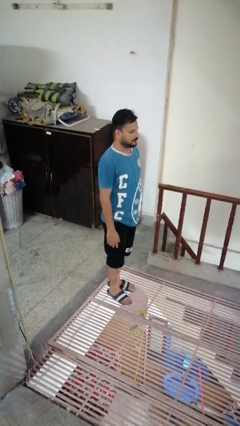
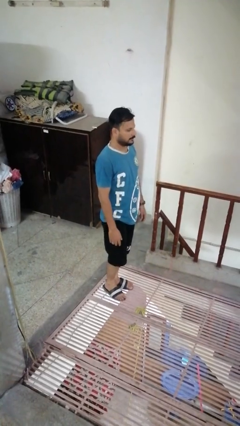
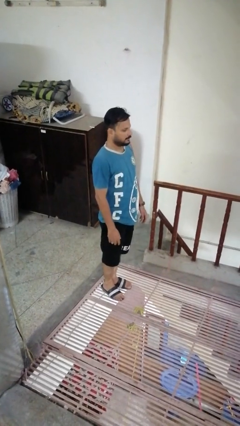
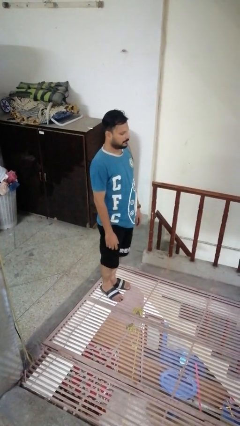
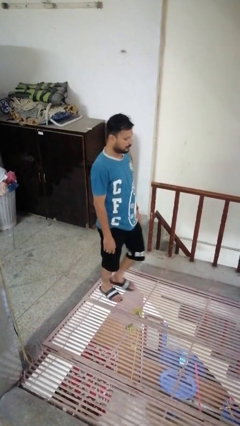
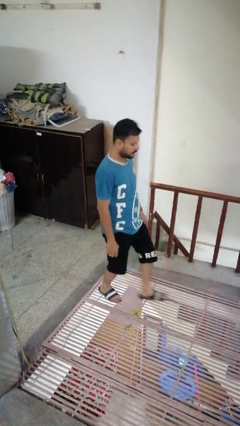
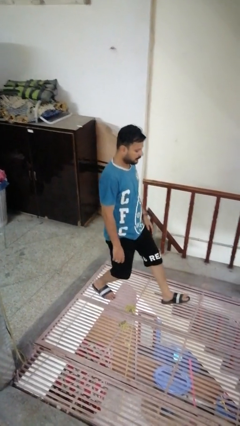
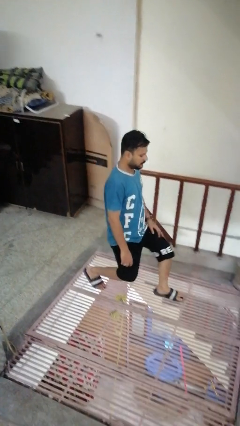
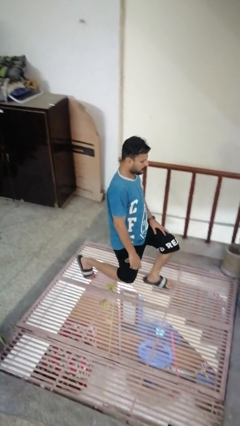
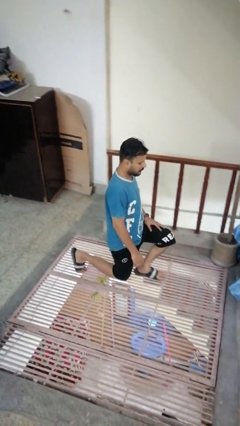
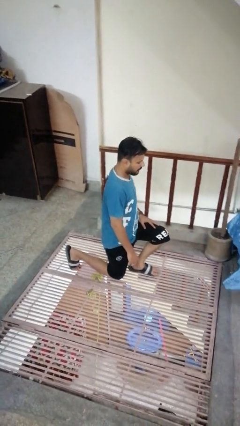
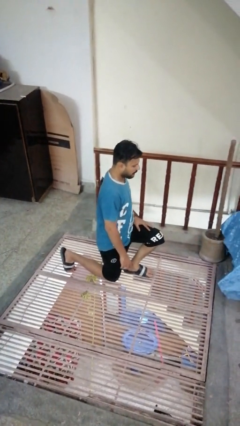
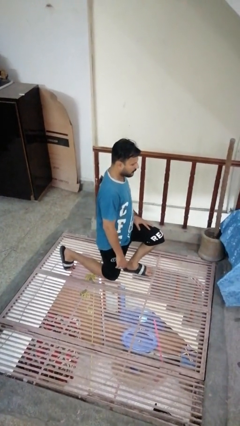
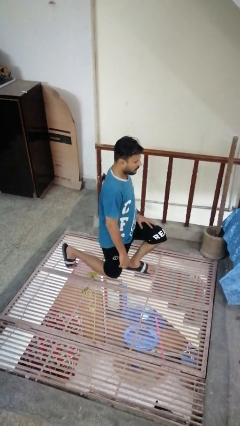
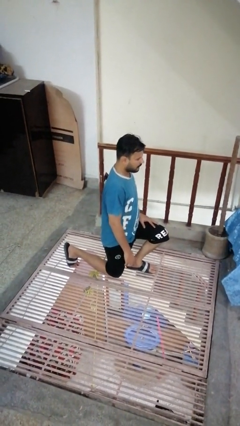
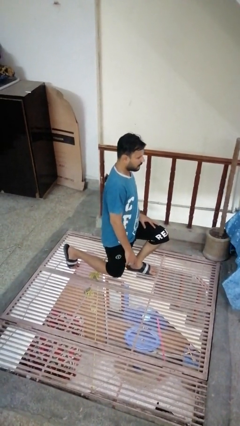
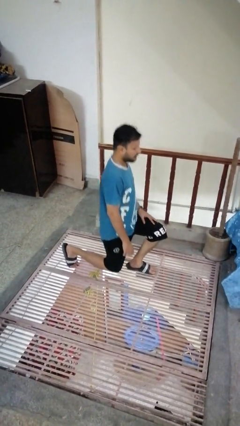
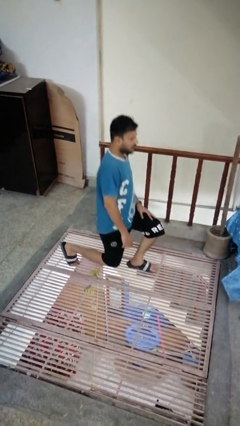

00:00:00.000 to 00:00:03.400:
person exercises with lunges

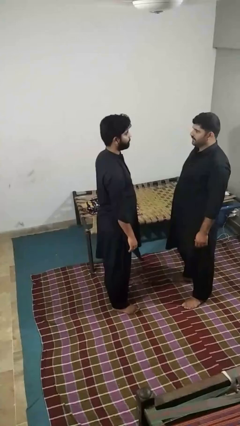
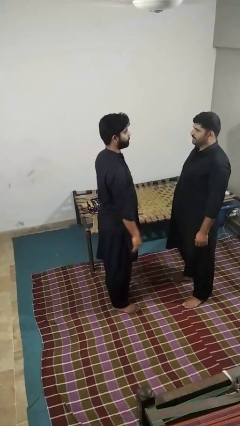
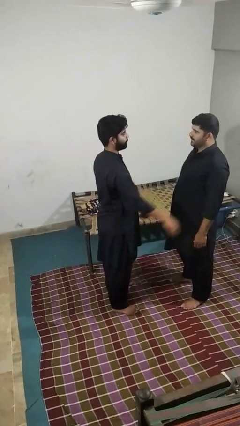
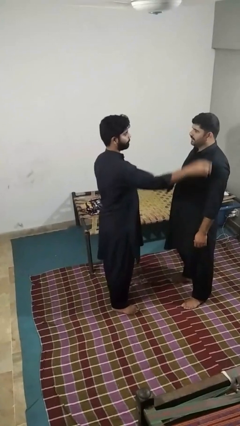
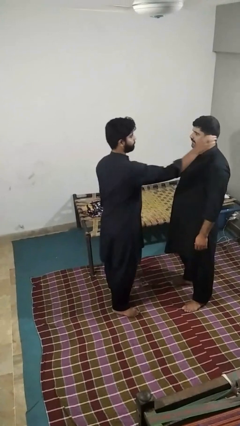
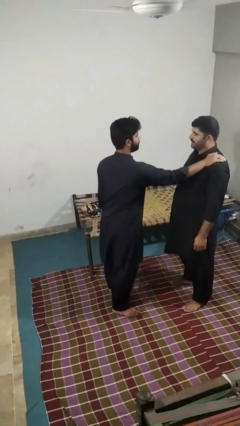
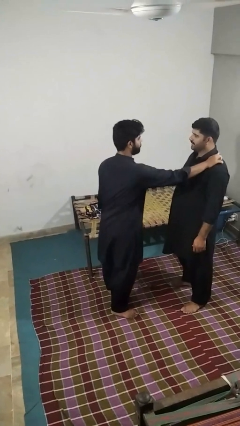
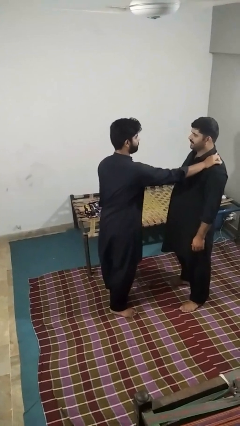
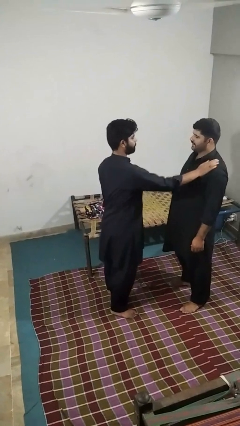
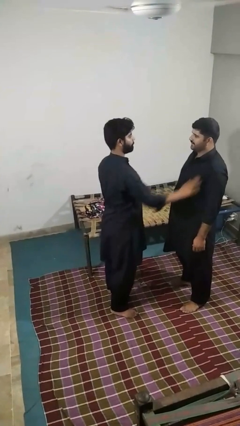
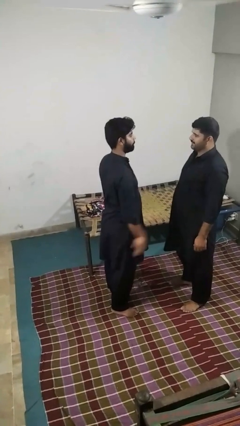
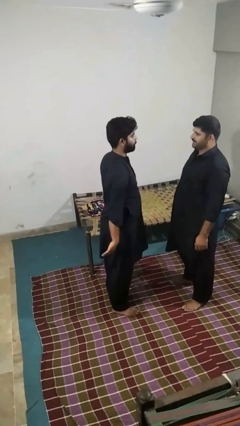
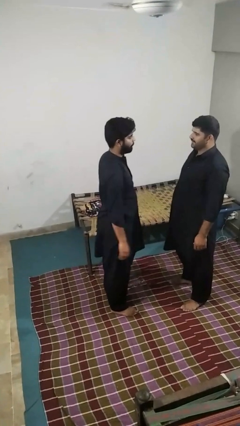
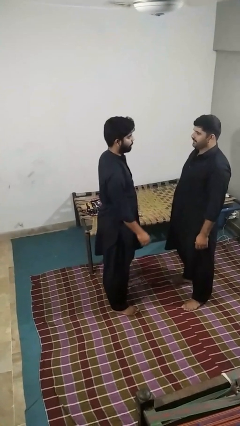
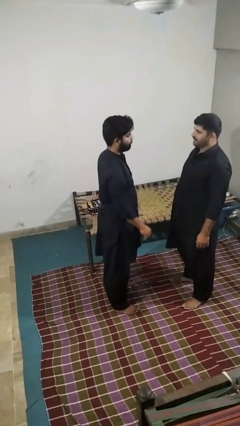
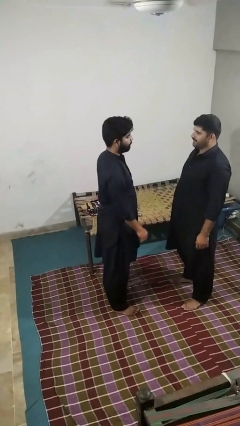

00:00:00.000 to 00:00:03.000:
person pounds shoulders of person

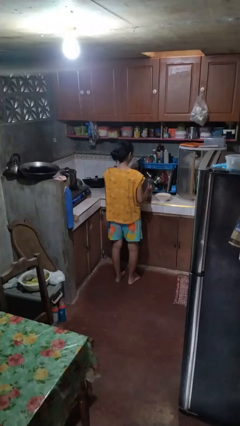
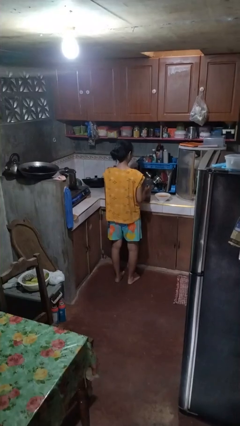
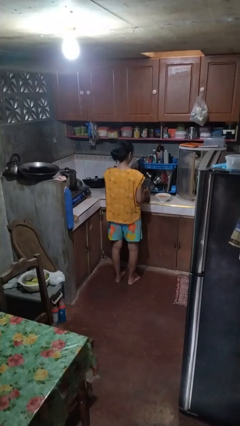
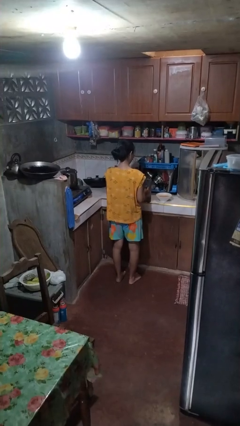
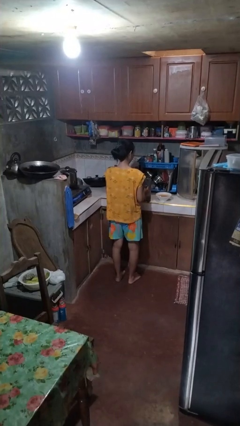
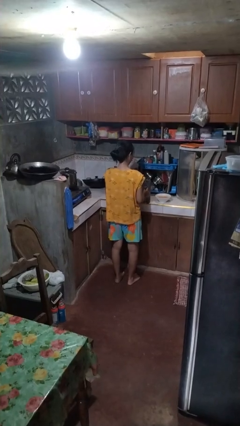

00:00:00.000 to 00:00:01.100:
person pours into bowl

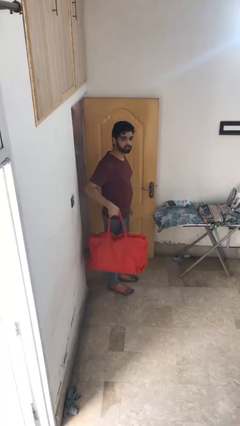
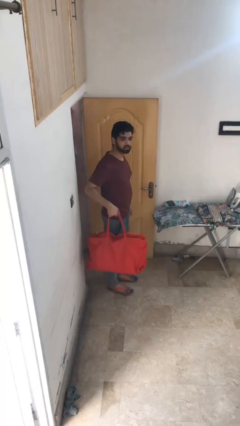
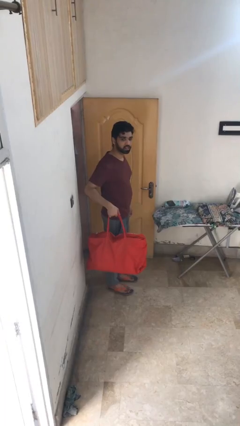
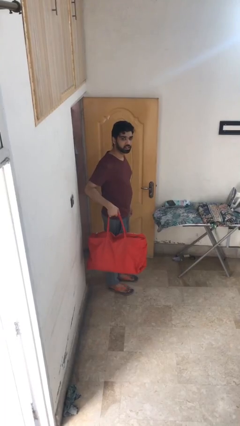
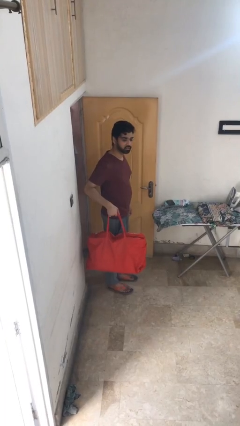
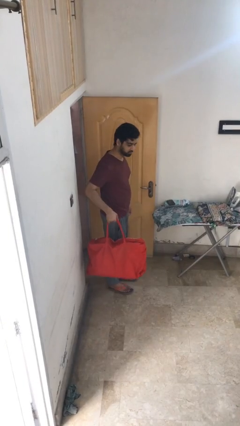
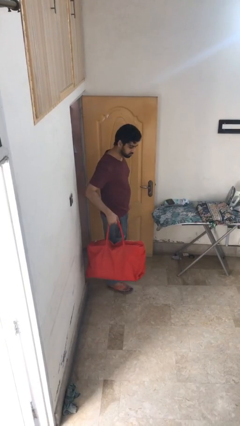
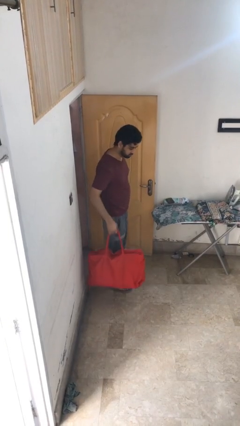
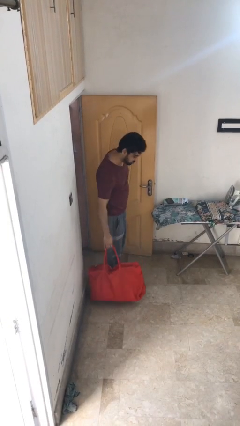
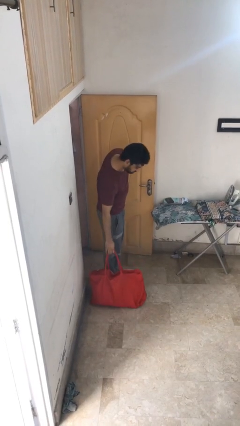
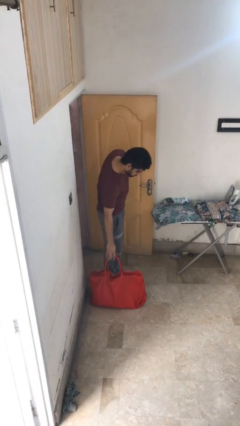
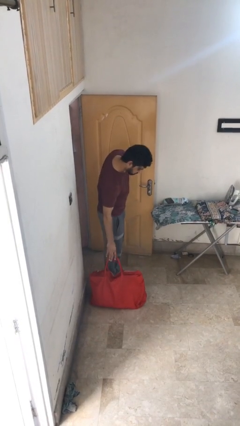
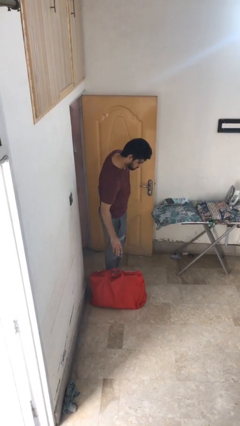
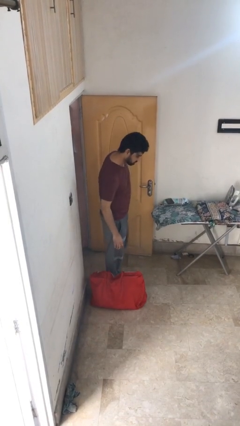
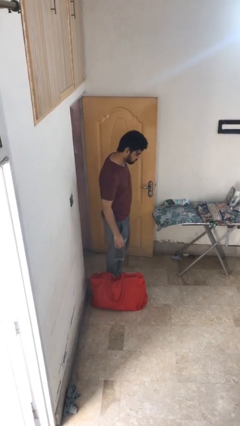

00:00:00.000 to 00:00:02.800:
person puts down object on floor

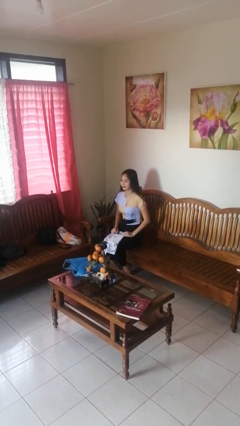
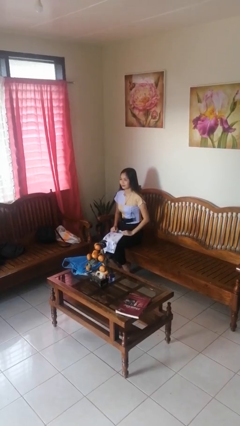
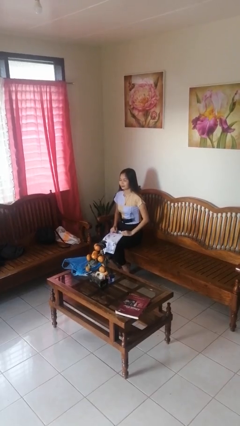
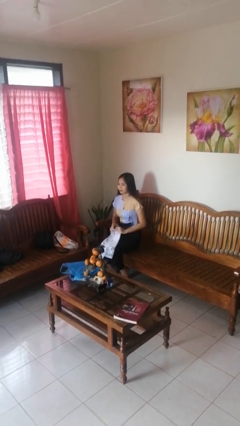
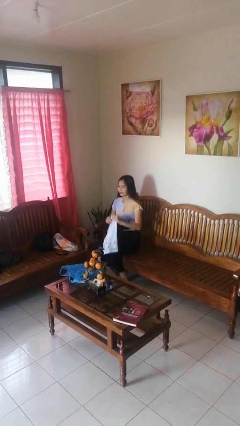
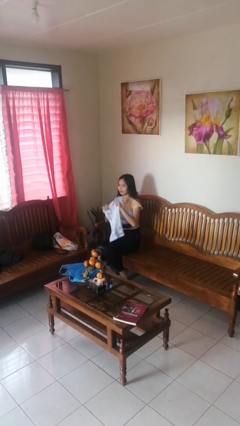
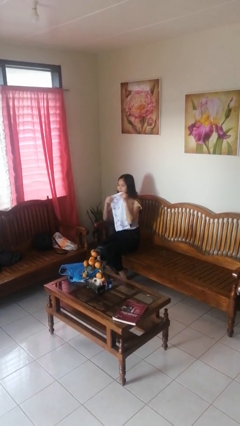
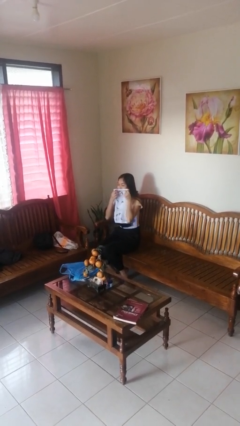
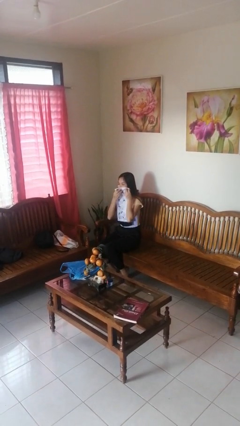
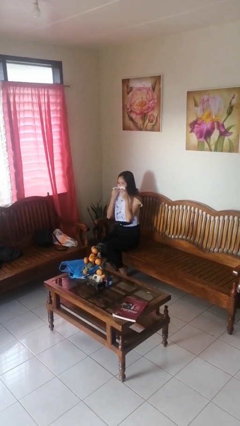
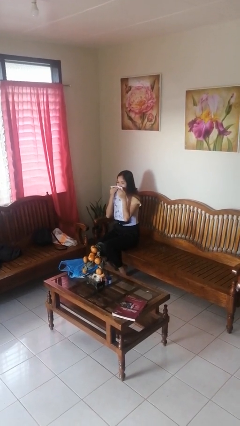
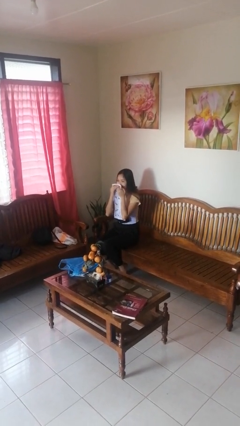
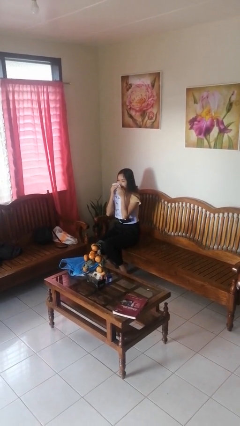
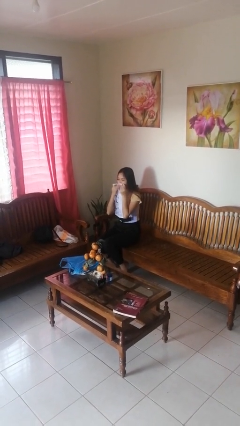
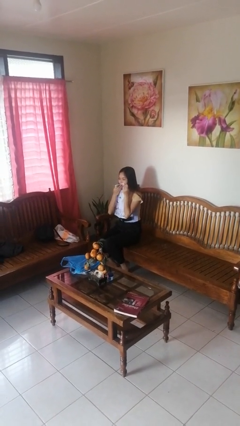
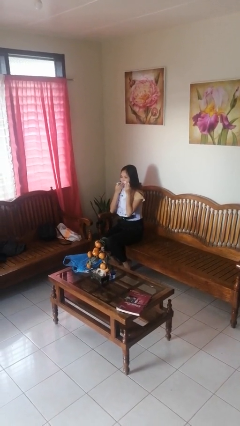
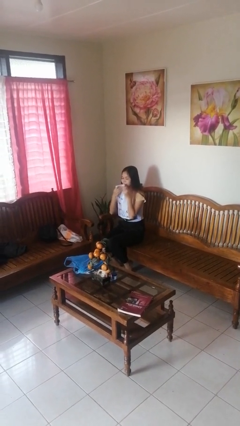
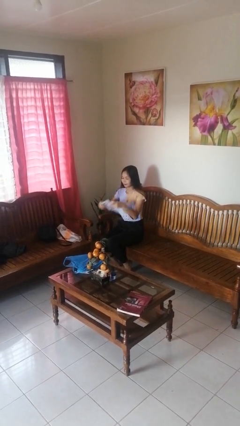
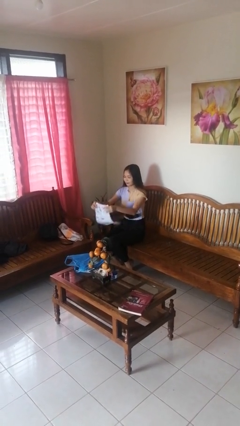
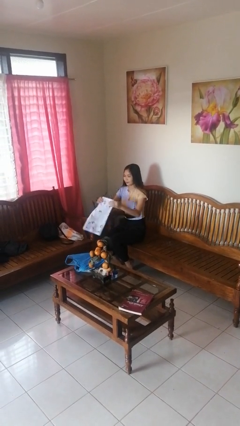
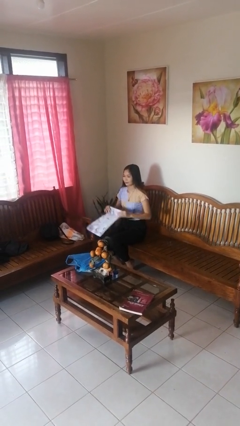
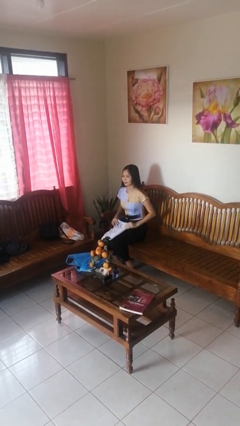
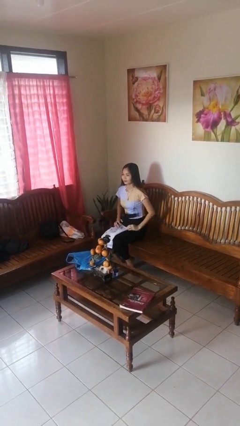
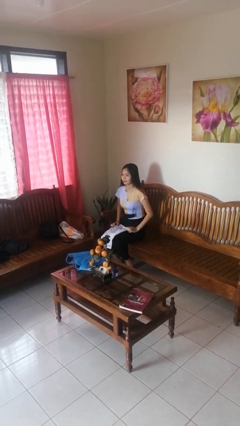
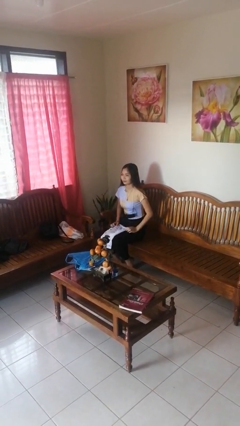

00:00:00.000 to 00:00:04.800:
person wipes mouth with napkin

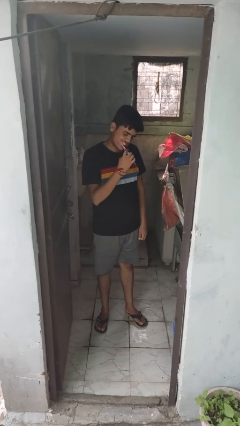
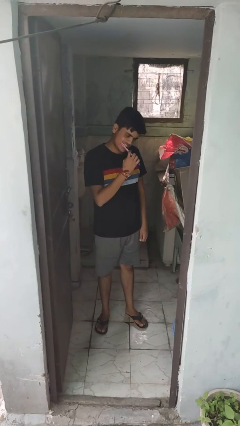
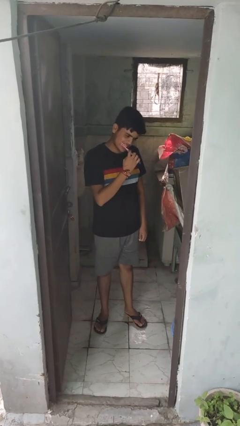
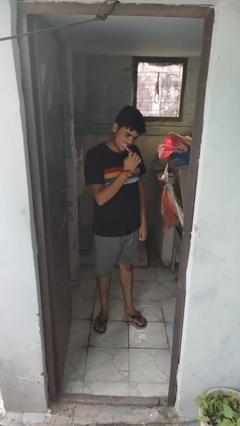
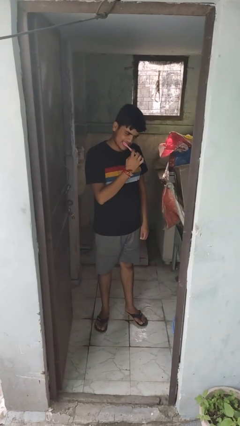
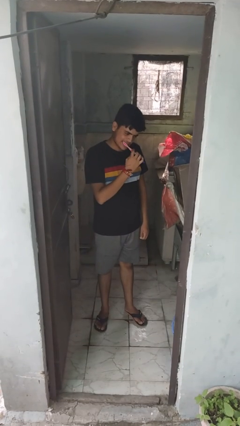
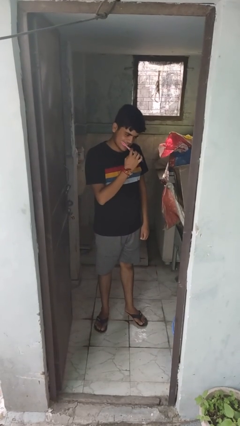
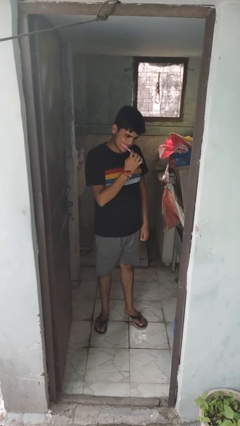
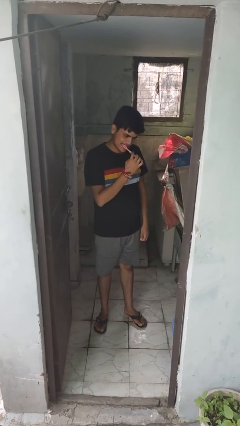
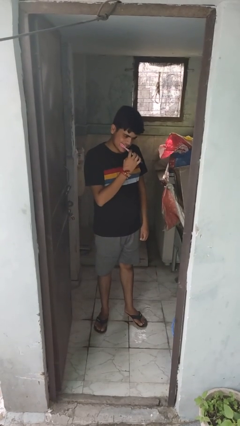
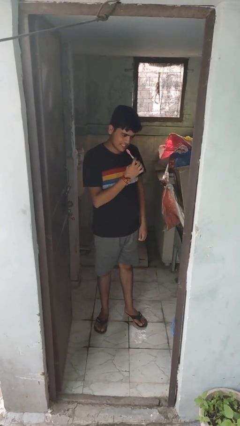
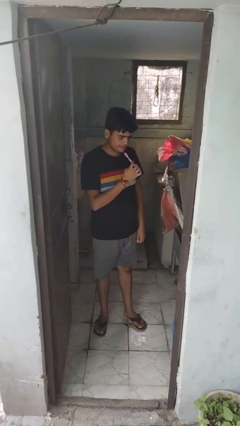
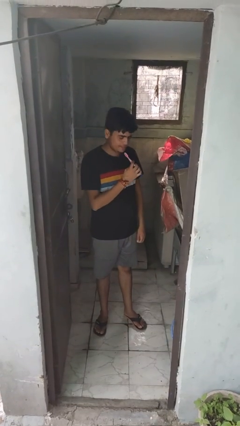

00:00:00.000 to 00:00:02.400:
person brushes teeth
